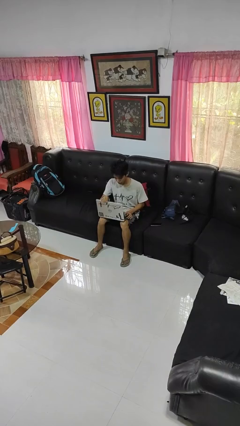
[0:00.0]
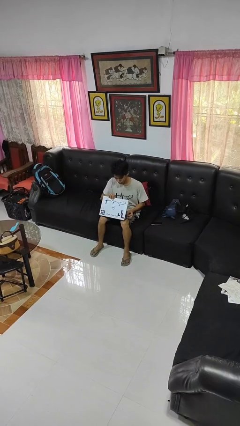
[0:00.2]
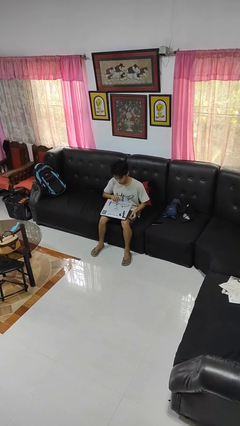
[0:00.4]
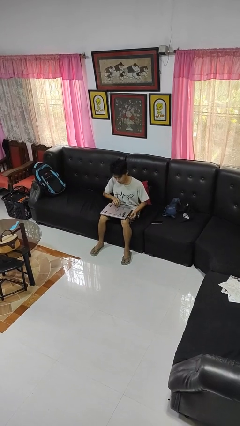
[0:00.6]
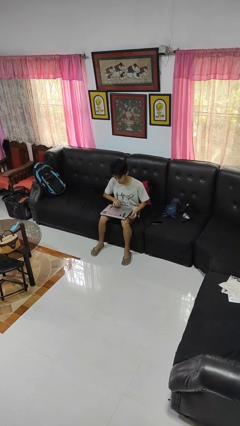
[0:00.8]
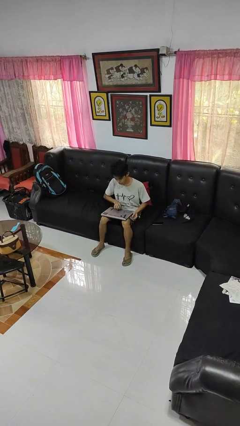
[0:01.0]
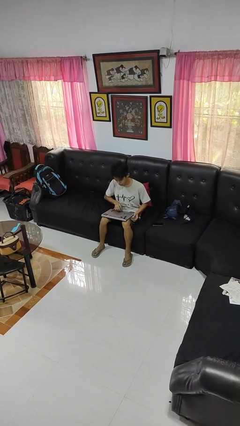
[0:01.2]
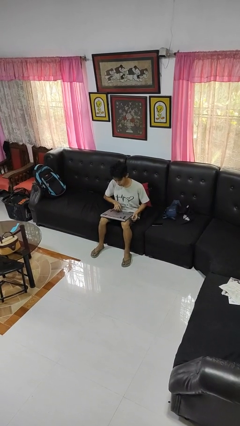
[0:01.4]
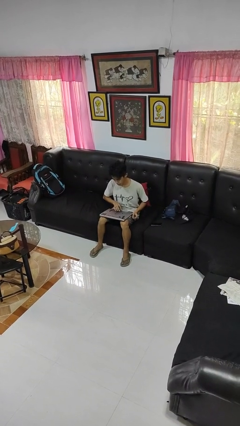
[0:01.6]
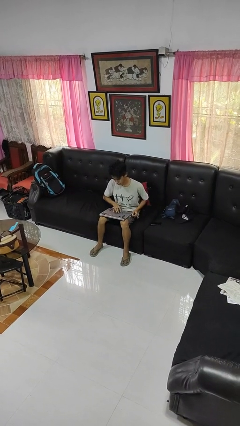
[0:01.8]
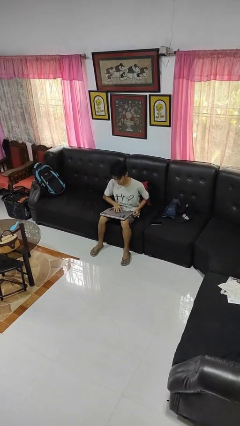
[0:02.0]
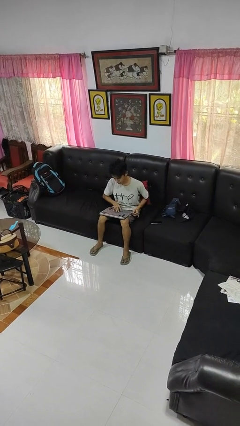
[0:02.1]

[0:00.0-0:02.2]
person closes laptop

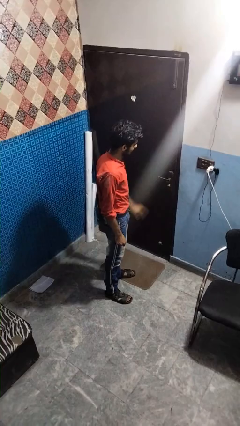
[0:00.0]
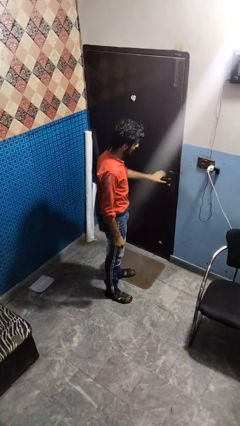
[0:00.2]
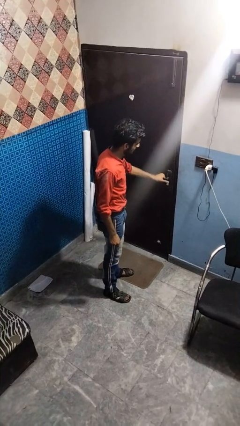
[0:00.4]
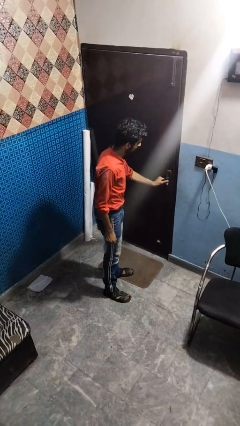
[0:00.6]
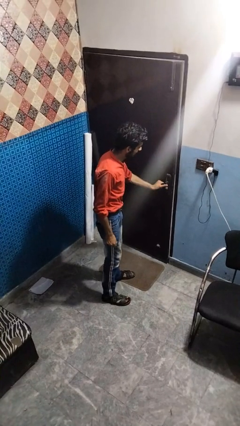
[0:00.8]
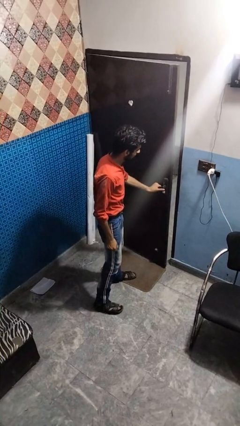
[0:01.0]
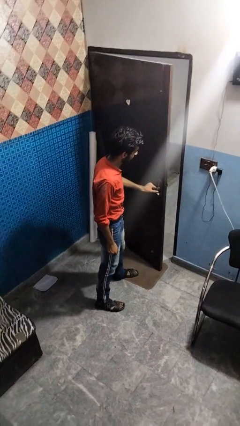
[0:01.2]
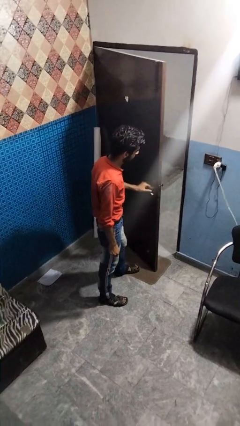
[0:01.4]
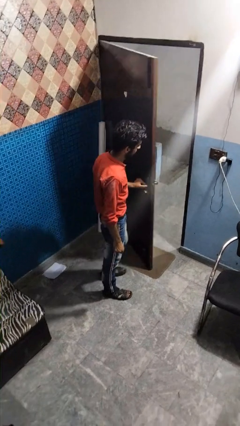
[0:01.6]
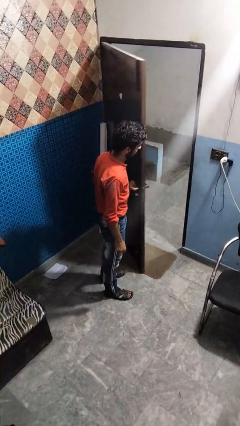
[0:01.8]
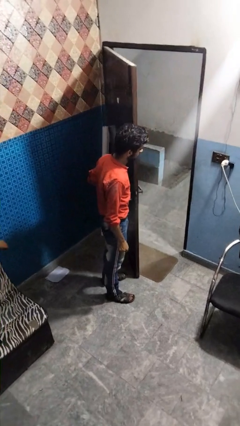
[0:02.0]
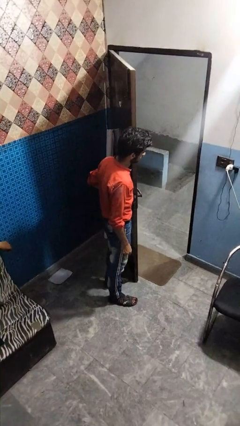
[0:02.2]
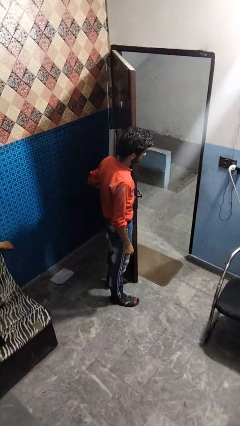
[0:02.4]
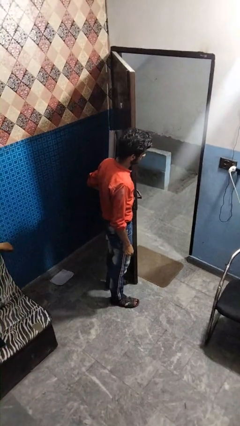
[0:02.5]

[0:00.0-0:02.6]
person opens facility door

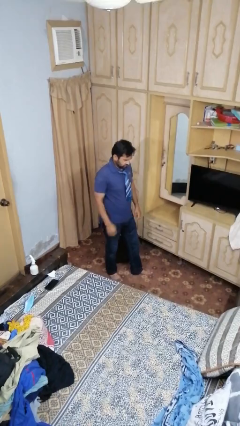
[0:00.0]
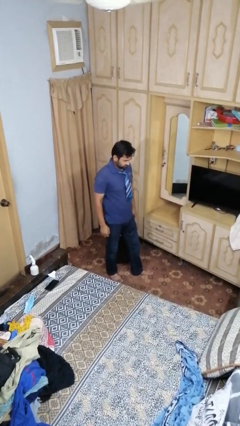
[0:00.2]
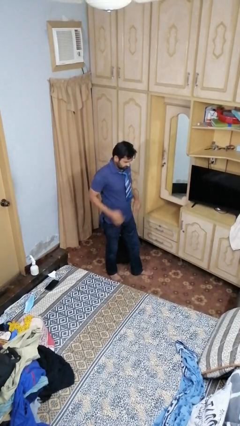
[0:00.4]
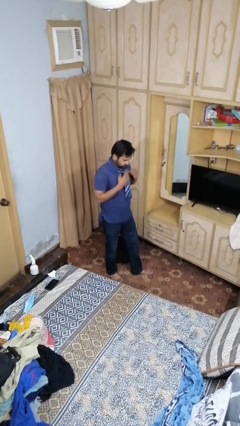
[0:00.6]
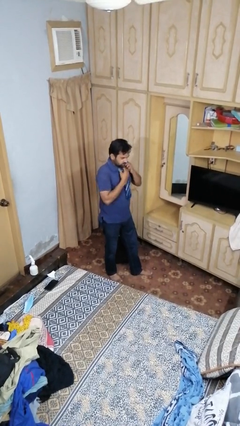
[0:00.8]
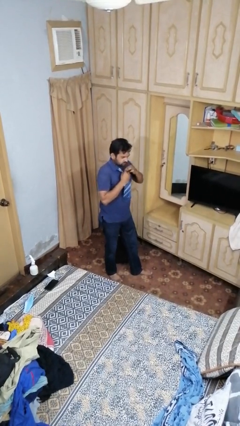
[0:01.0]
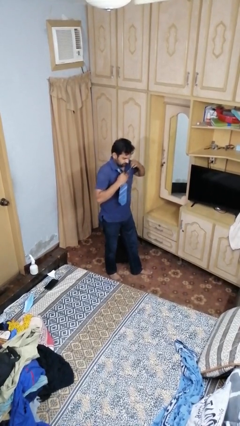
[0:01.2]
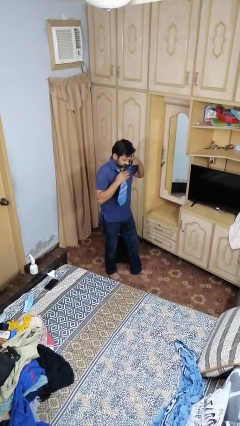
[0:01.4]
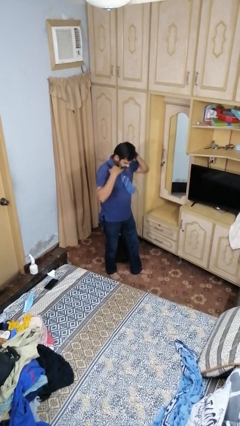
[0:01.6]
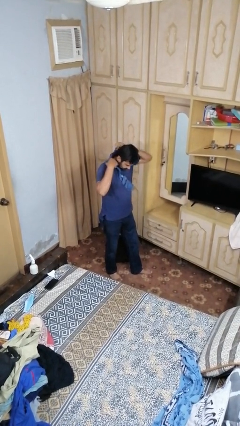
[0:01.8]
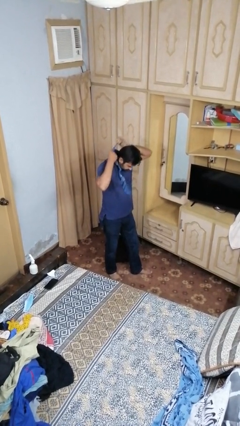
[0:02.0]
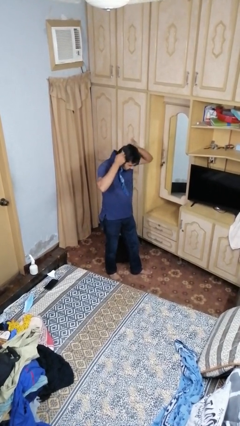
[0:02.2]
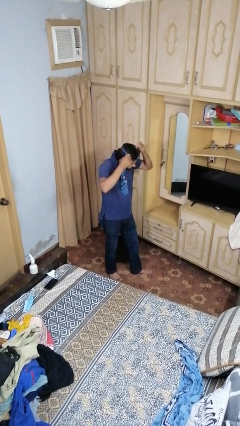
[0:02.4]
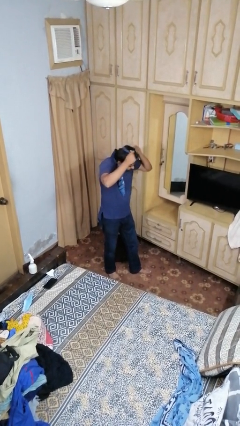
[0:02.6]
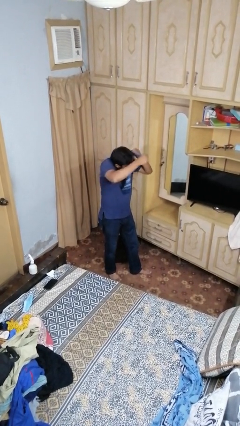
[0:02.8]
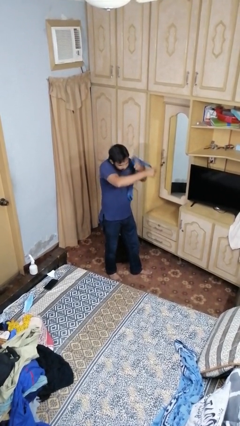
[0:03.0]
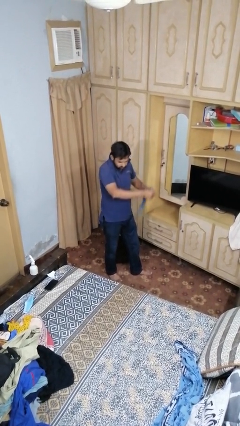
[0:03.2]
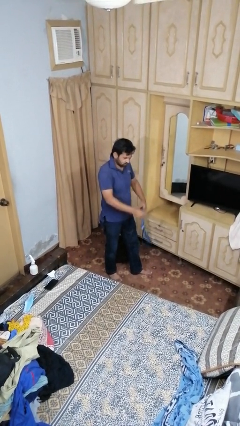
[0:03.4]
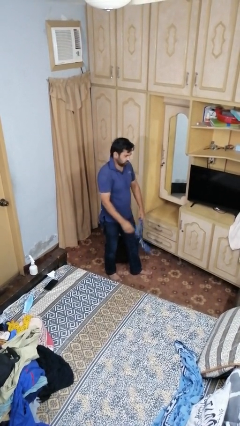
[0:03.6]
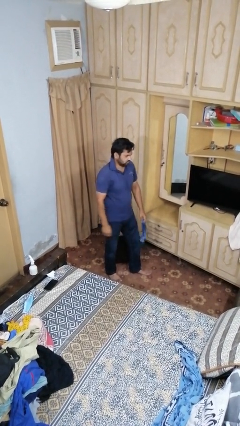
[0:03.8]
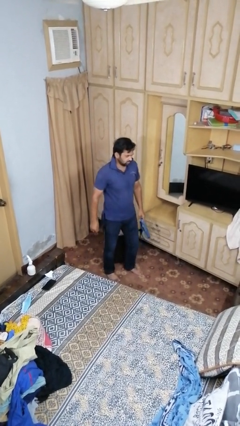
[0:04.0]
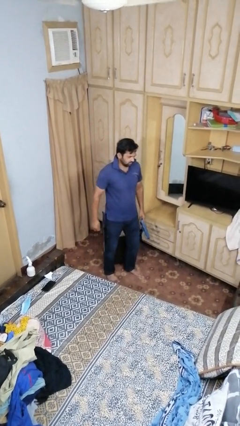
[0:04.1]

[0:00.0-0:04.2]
person takes off necktie

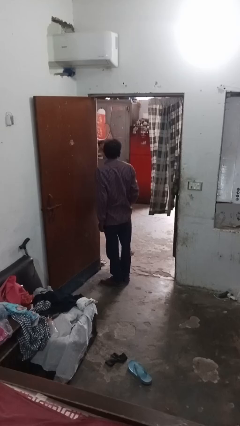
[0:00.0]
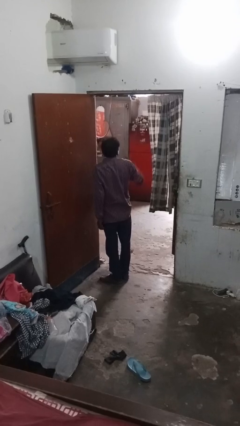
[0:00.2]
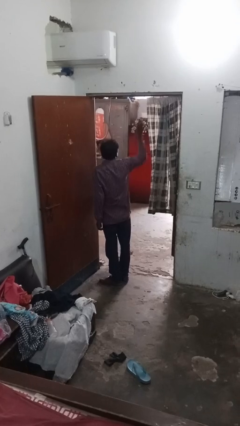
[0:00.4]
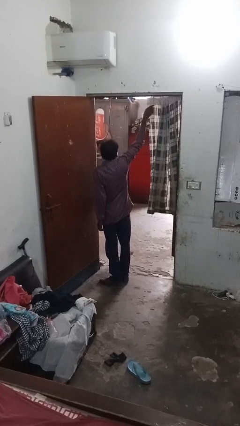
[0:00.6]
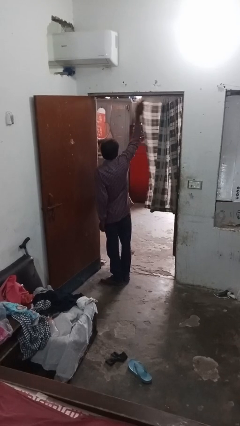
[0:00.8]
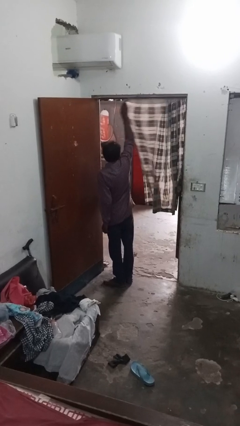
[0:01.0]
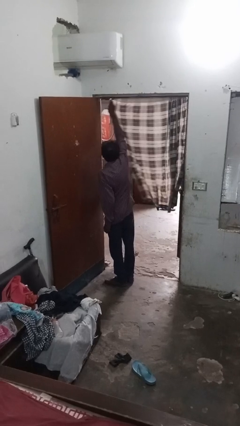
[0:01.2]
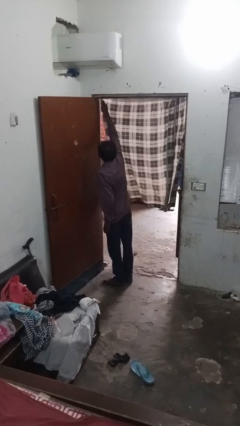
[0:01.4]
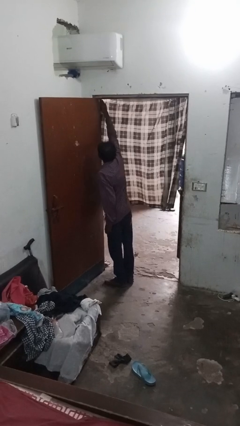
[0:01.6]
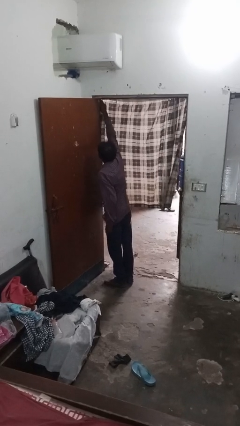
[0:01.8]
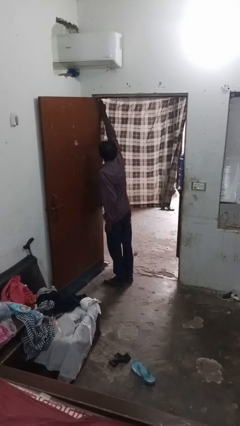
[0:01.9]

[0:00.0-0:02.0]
person closes curtains

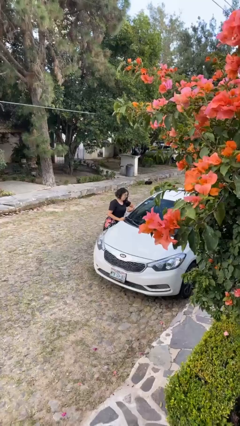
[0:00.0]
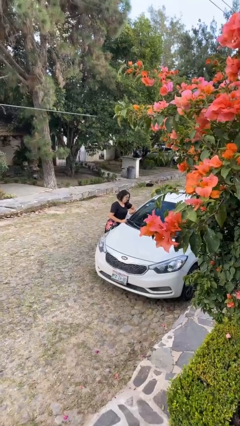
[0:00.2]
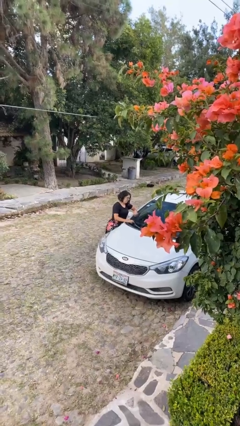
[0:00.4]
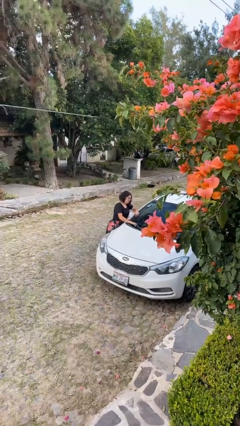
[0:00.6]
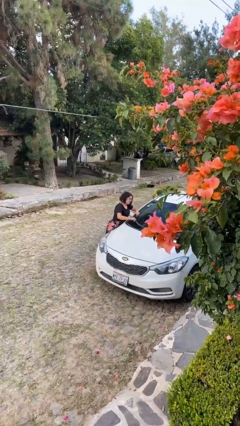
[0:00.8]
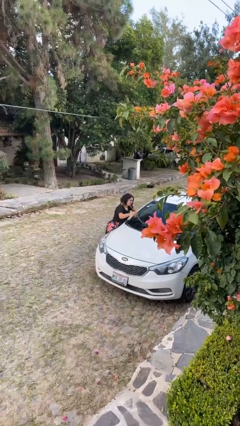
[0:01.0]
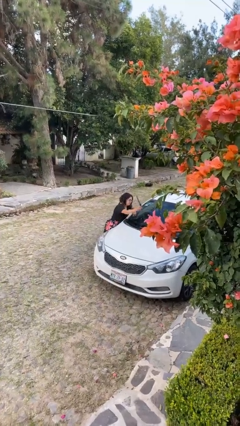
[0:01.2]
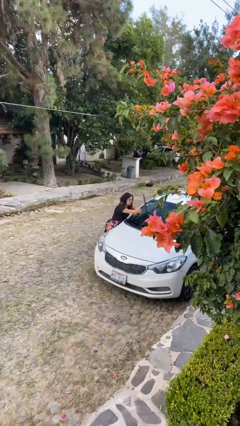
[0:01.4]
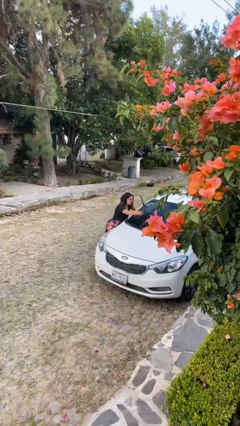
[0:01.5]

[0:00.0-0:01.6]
person flips up car wipers

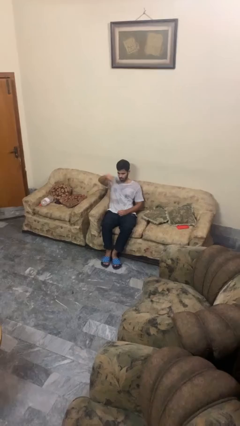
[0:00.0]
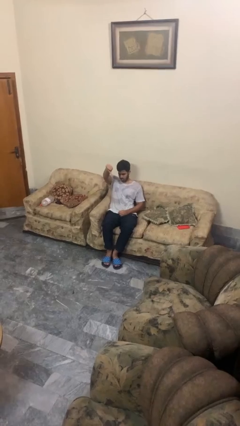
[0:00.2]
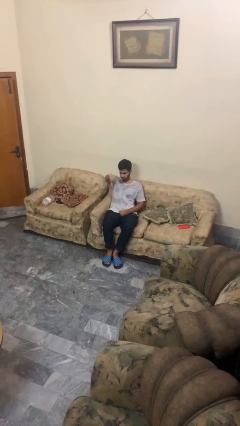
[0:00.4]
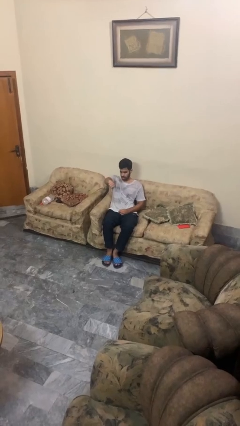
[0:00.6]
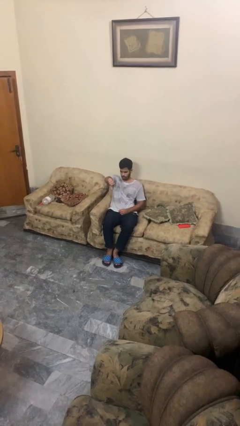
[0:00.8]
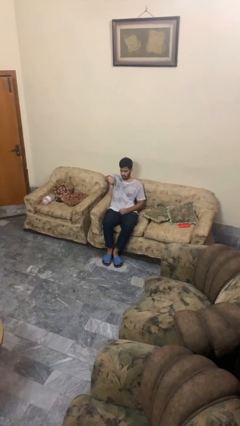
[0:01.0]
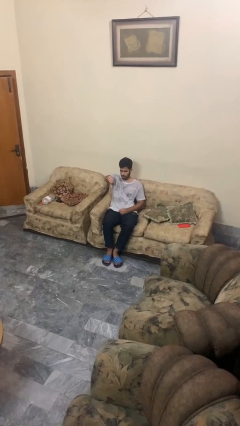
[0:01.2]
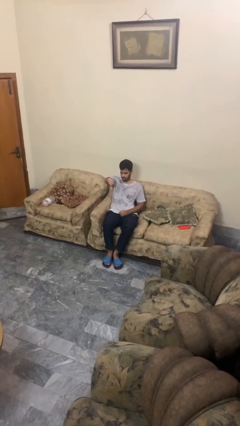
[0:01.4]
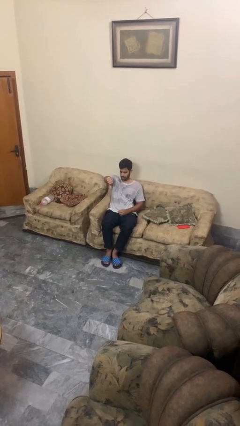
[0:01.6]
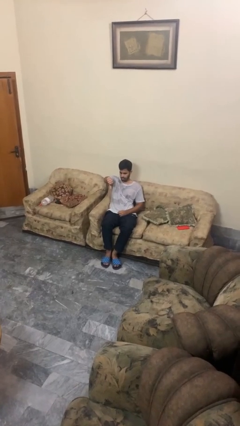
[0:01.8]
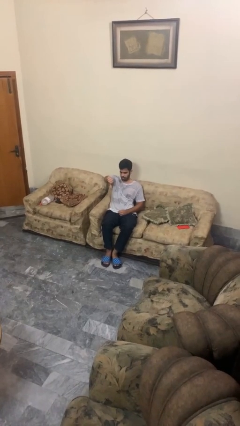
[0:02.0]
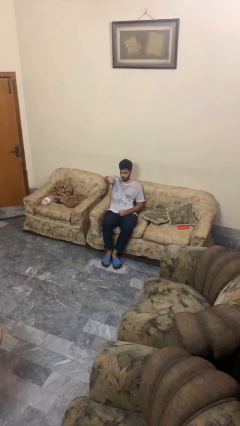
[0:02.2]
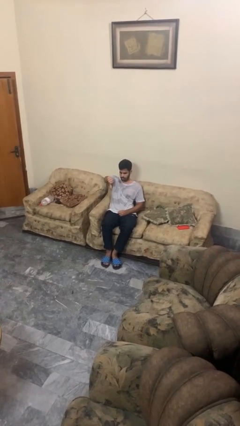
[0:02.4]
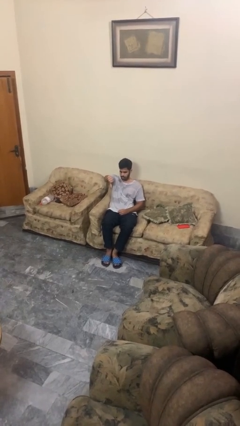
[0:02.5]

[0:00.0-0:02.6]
person gestures thumbs down

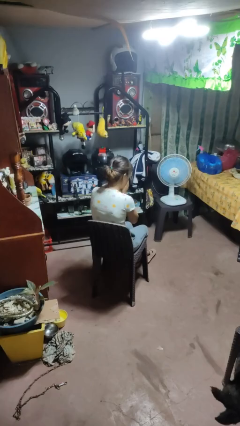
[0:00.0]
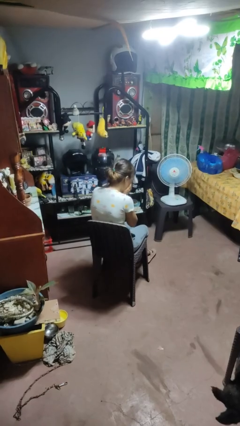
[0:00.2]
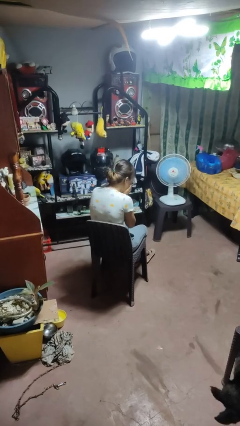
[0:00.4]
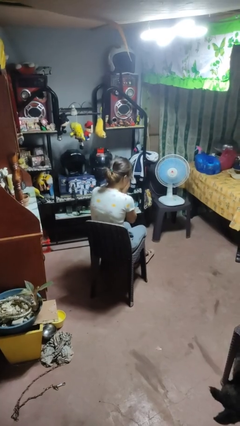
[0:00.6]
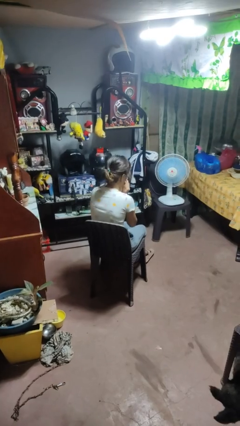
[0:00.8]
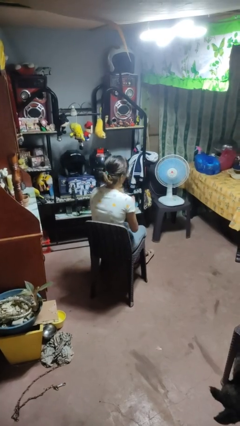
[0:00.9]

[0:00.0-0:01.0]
person sneezes into hand

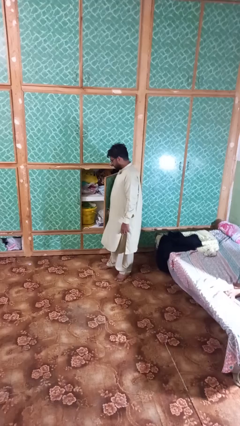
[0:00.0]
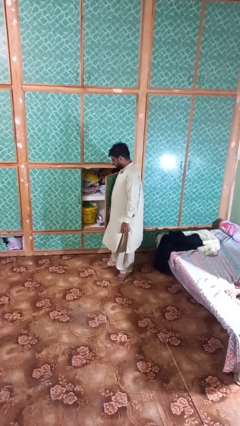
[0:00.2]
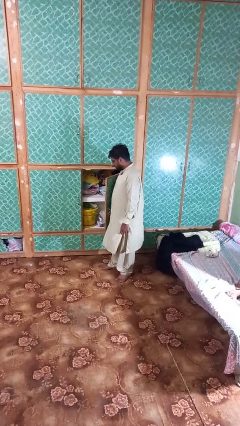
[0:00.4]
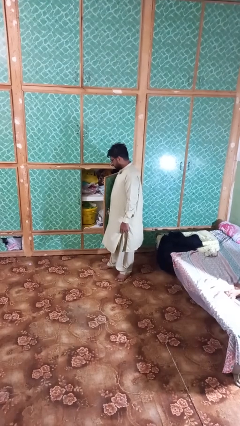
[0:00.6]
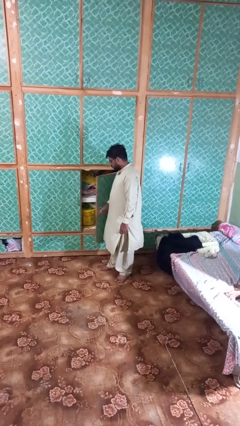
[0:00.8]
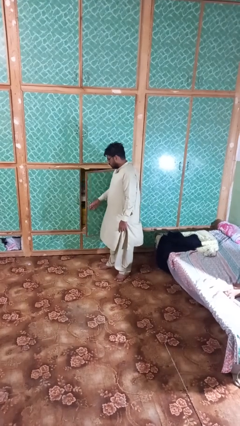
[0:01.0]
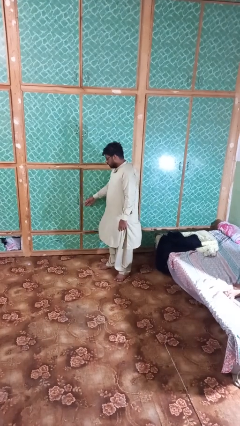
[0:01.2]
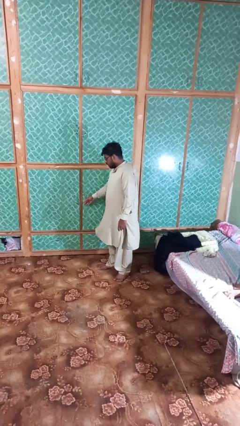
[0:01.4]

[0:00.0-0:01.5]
person closes closet door
